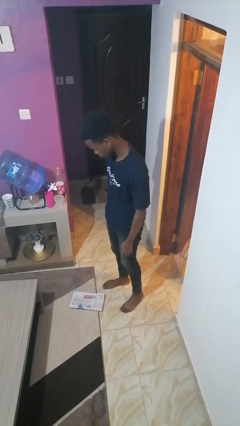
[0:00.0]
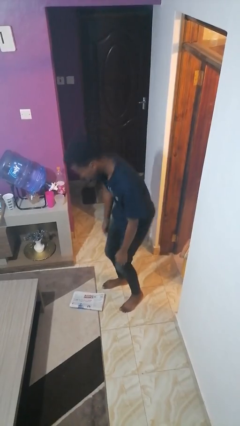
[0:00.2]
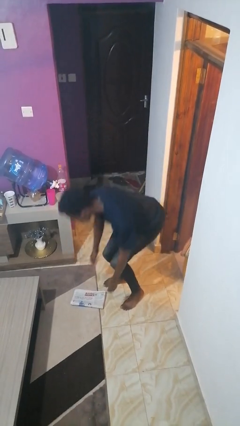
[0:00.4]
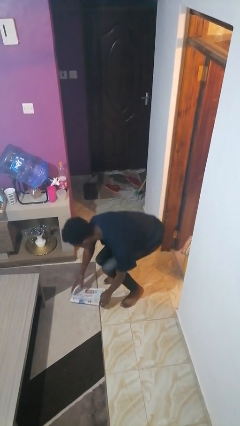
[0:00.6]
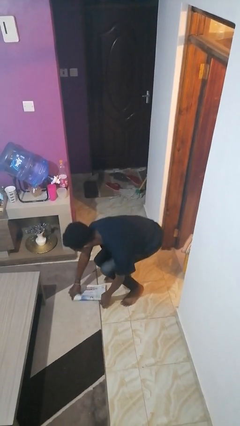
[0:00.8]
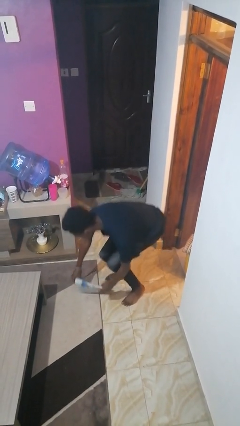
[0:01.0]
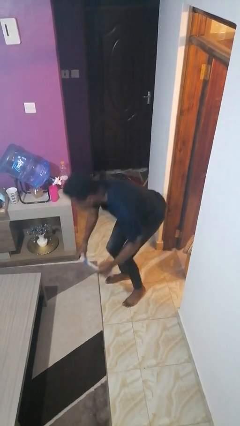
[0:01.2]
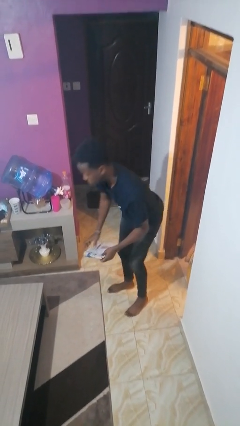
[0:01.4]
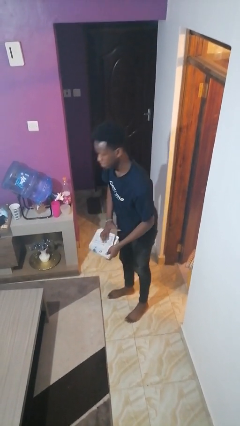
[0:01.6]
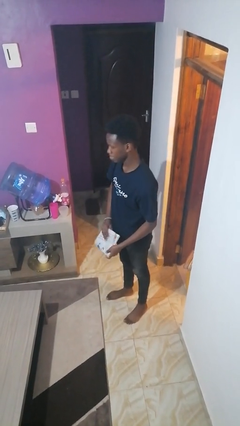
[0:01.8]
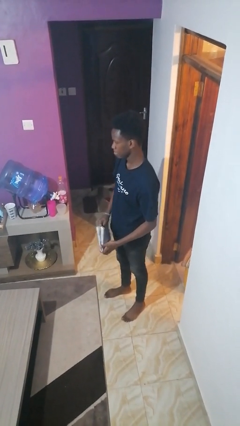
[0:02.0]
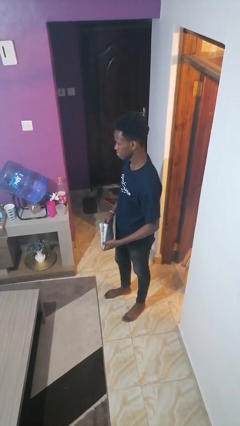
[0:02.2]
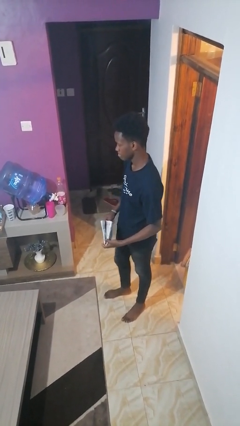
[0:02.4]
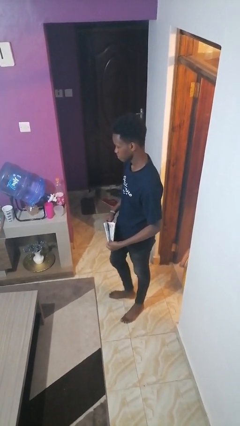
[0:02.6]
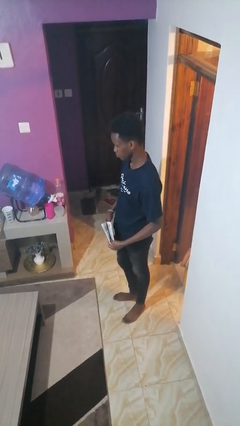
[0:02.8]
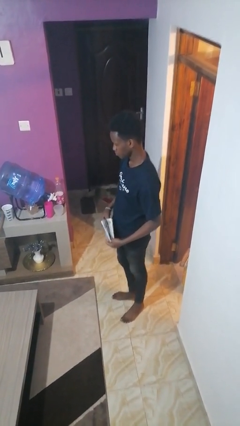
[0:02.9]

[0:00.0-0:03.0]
person picks up object from floor

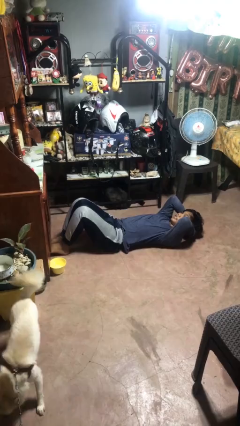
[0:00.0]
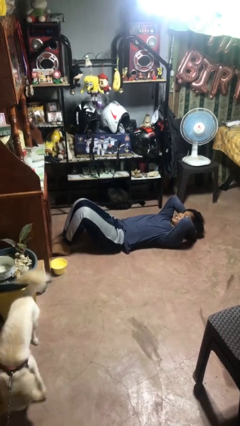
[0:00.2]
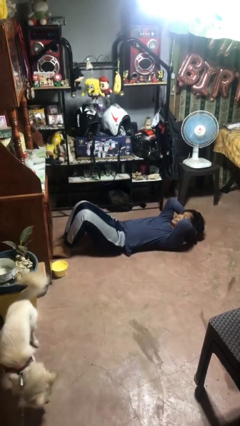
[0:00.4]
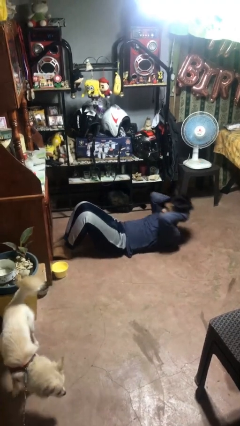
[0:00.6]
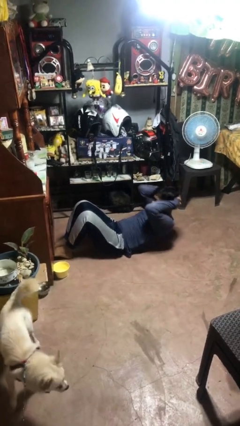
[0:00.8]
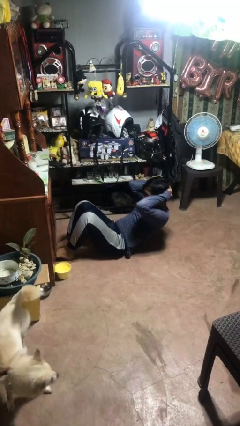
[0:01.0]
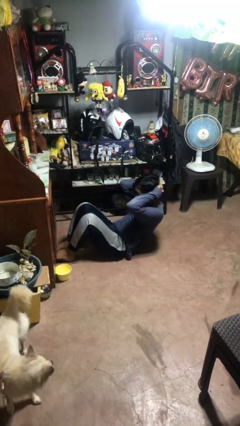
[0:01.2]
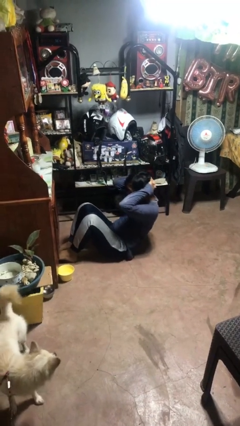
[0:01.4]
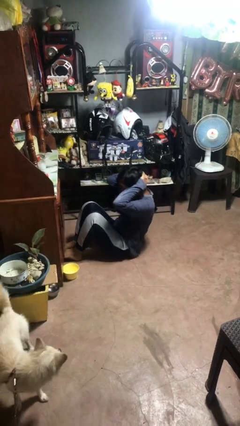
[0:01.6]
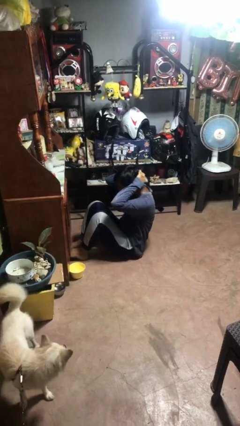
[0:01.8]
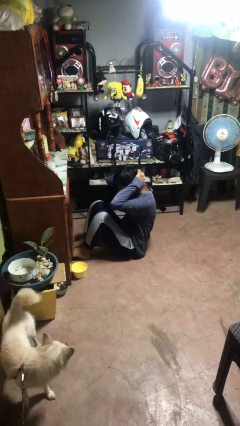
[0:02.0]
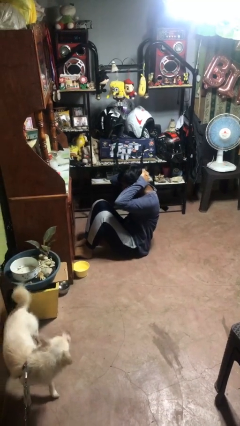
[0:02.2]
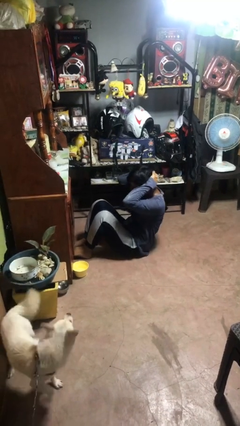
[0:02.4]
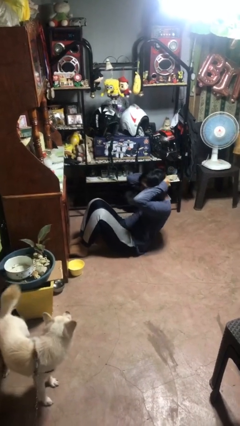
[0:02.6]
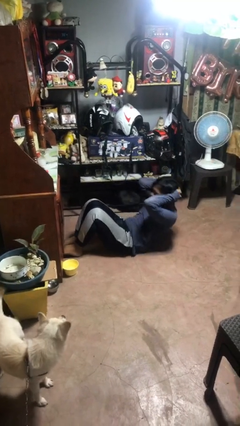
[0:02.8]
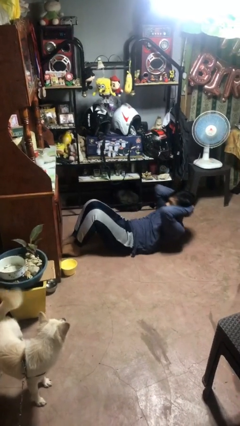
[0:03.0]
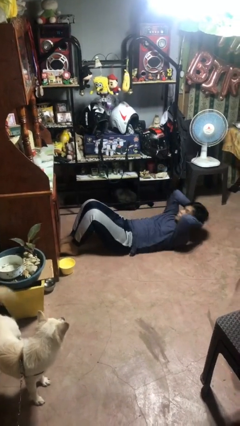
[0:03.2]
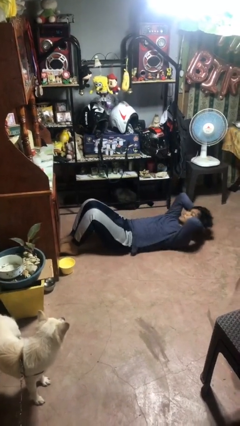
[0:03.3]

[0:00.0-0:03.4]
person exercises with situp

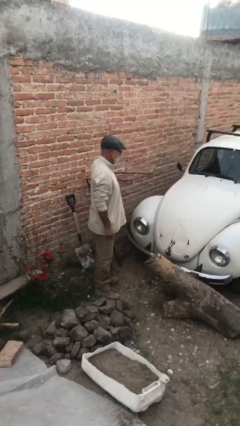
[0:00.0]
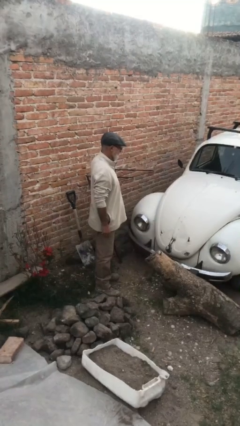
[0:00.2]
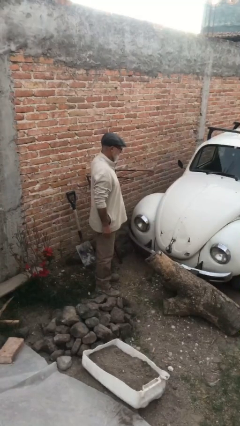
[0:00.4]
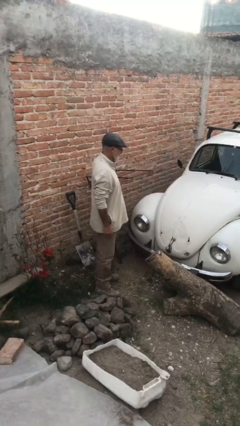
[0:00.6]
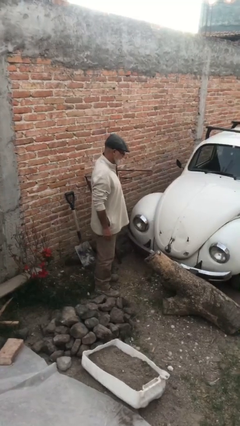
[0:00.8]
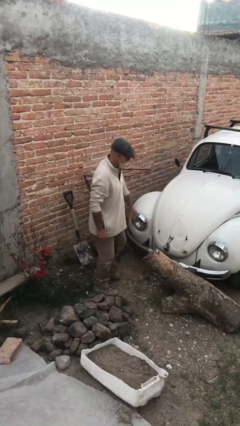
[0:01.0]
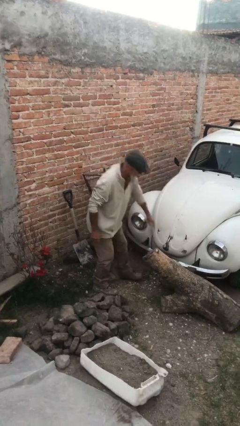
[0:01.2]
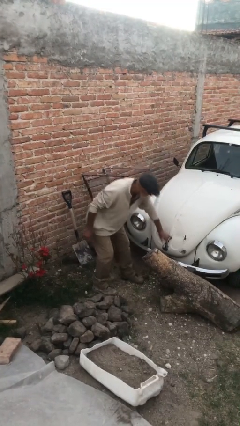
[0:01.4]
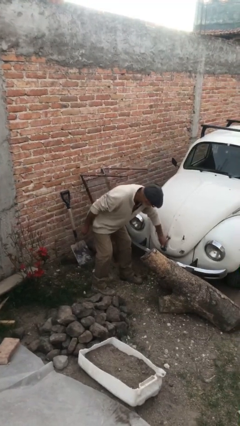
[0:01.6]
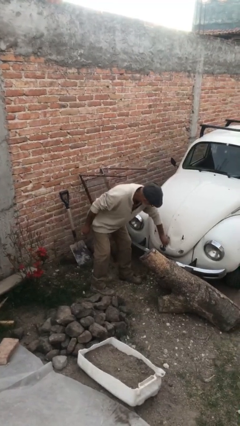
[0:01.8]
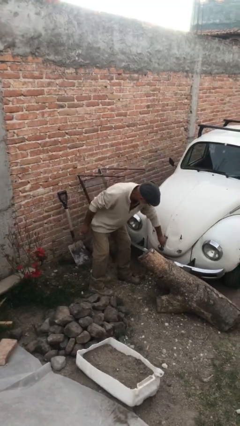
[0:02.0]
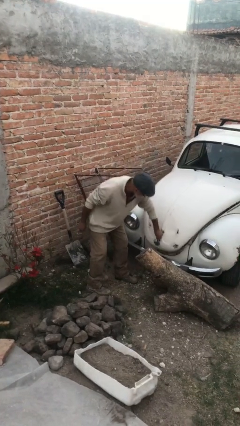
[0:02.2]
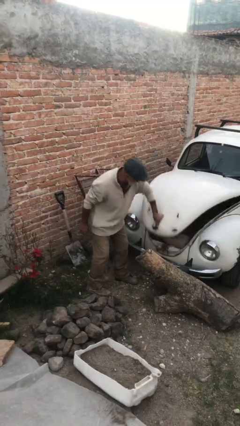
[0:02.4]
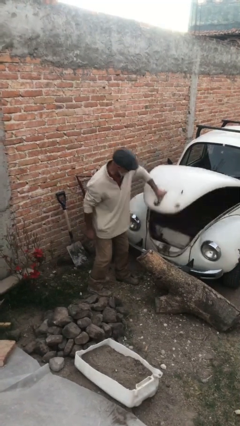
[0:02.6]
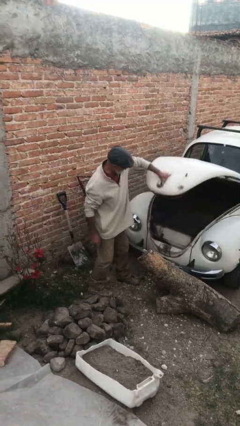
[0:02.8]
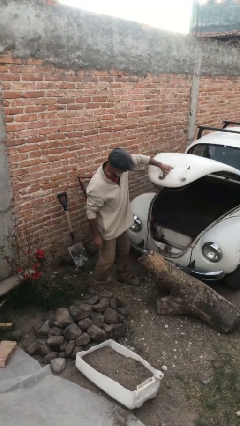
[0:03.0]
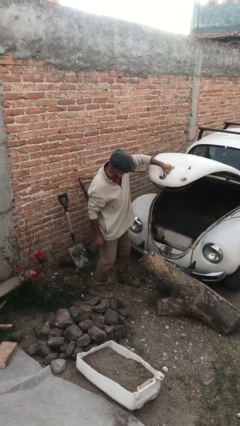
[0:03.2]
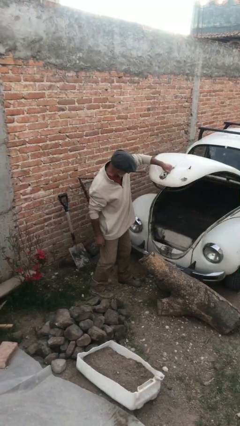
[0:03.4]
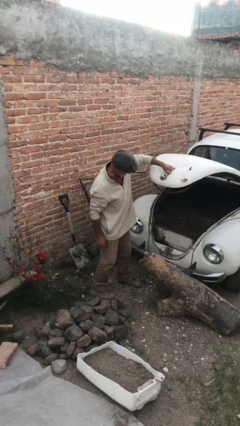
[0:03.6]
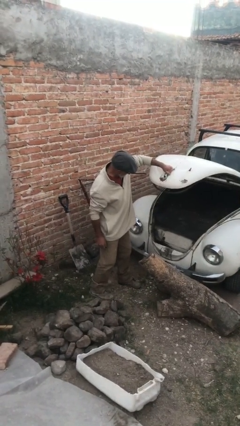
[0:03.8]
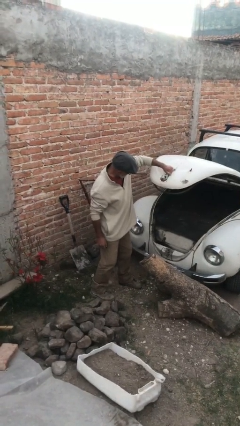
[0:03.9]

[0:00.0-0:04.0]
person opens car trunk

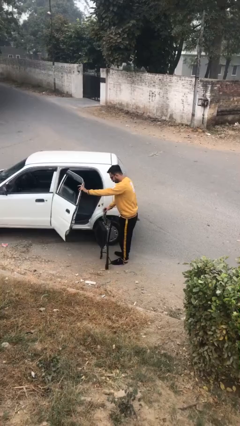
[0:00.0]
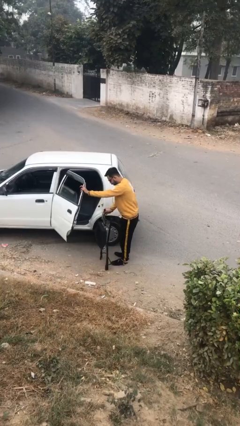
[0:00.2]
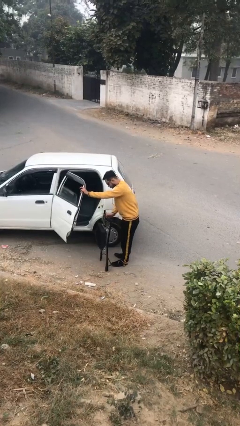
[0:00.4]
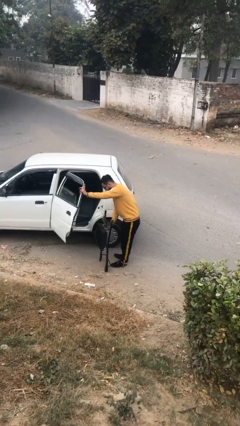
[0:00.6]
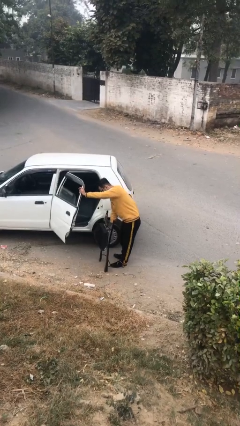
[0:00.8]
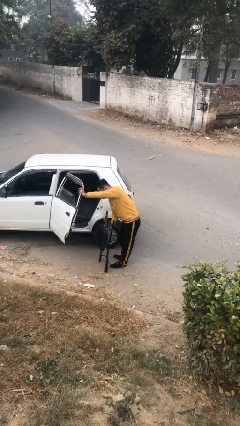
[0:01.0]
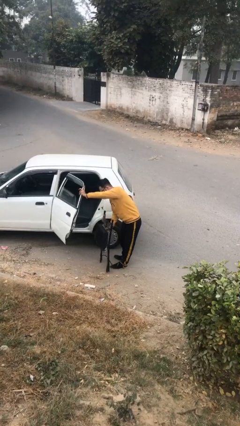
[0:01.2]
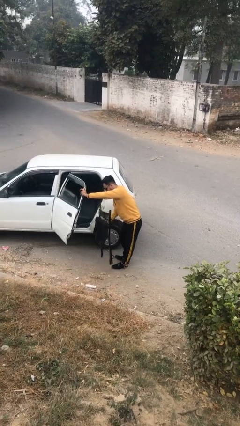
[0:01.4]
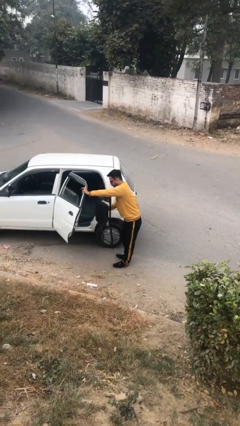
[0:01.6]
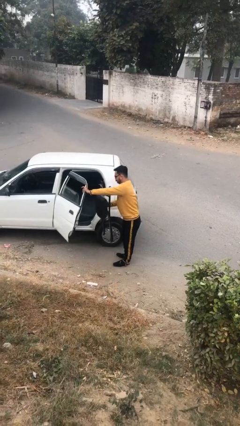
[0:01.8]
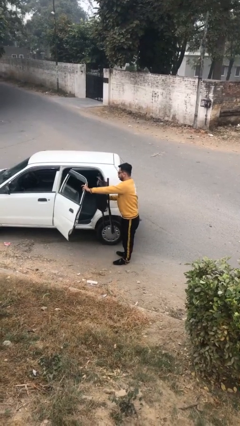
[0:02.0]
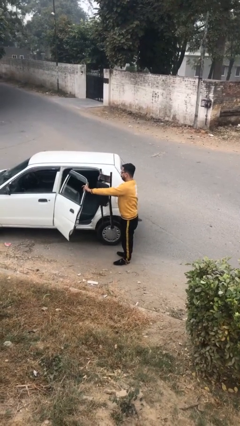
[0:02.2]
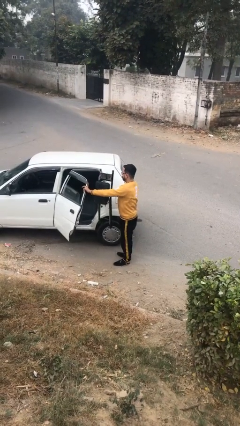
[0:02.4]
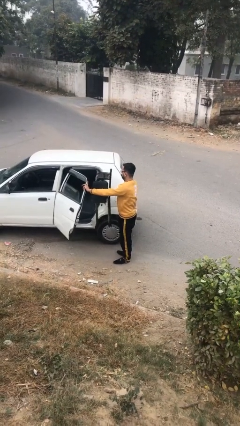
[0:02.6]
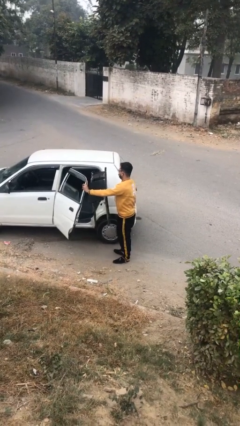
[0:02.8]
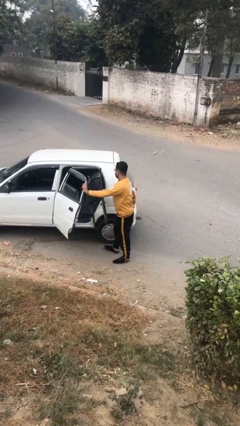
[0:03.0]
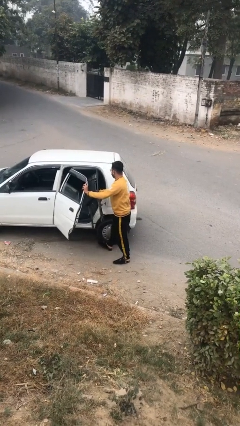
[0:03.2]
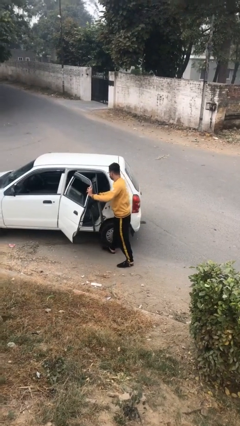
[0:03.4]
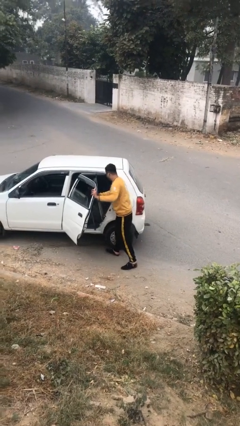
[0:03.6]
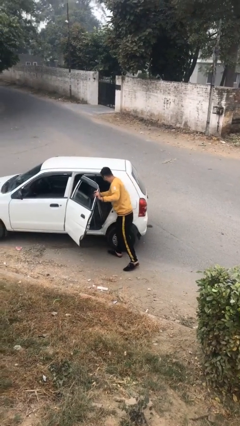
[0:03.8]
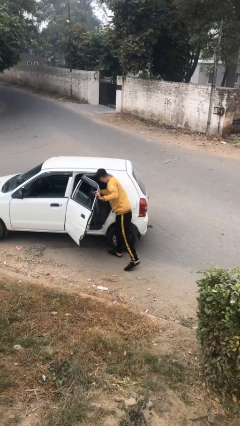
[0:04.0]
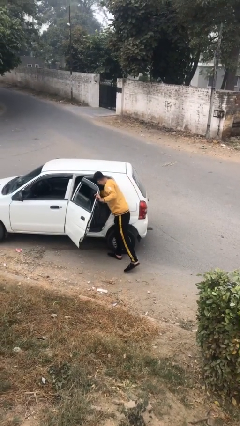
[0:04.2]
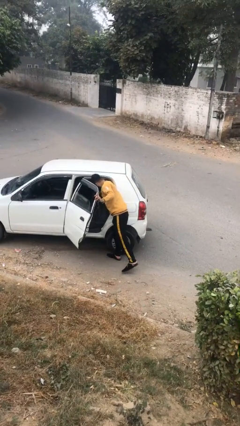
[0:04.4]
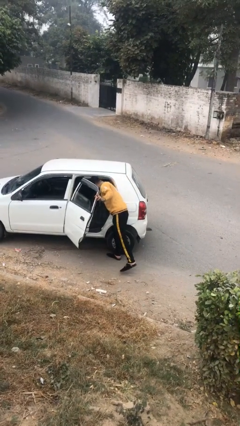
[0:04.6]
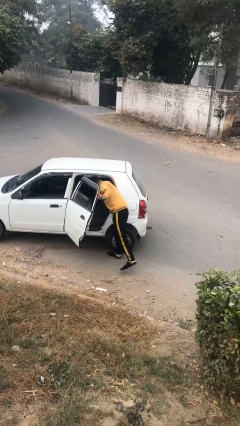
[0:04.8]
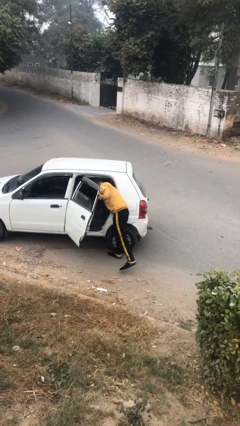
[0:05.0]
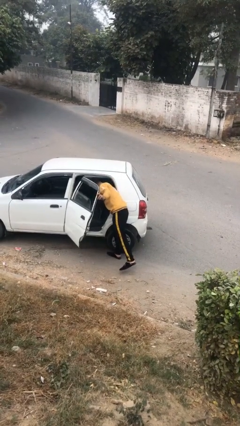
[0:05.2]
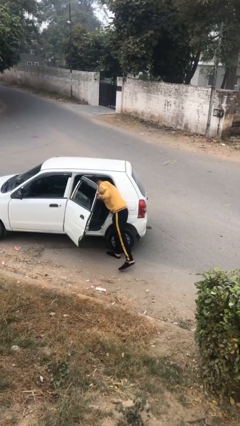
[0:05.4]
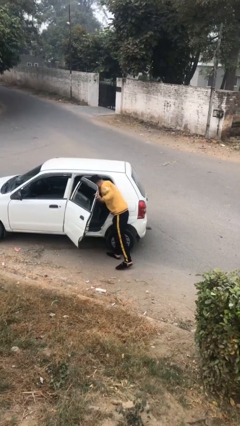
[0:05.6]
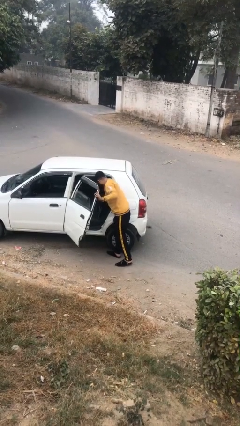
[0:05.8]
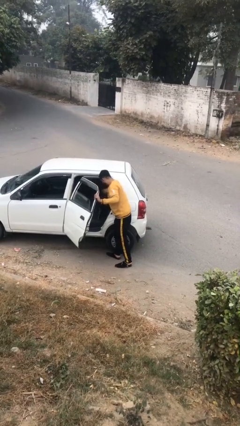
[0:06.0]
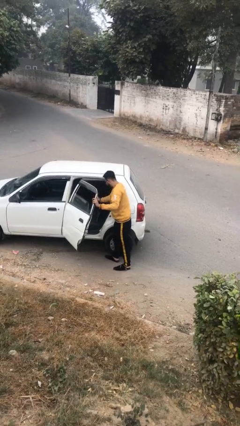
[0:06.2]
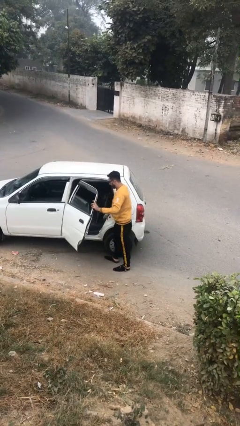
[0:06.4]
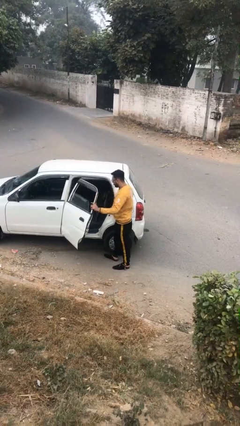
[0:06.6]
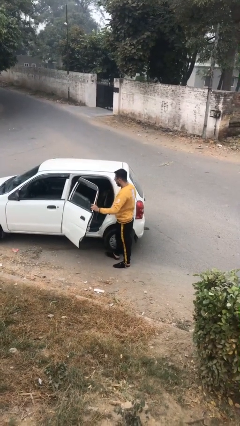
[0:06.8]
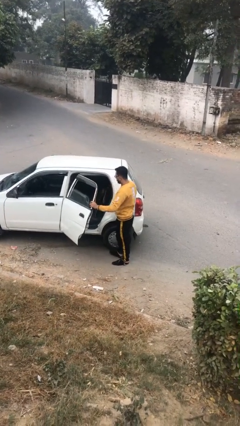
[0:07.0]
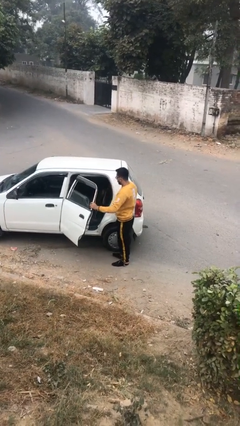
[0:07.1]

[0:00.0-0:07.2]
person loads car

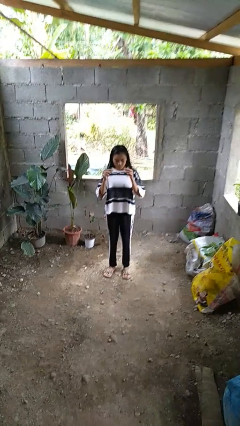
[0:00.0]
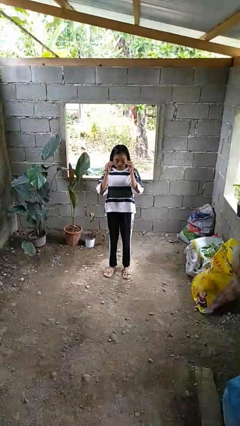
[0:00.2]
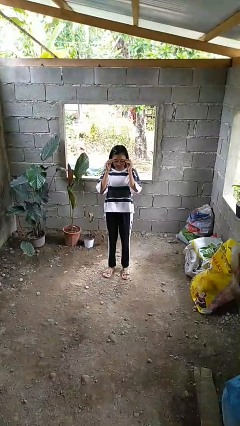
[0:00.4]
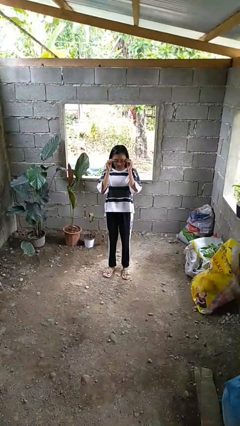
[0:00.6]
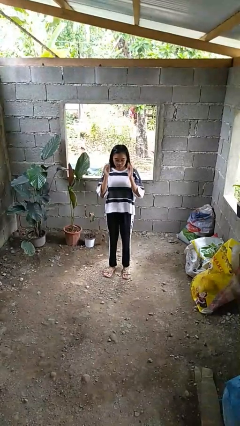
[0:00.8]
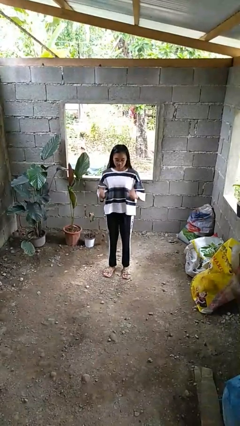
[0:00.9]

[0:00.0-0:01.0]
person puts on glasses
